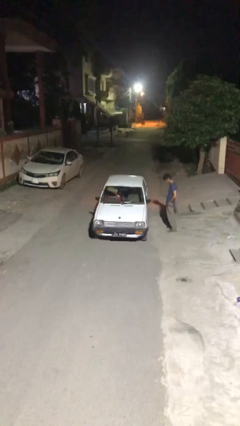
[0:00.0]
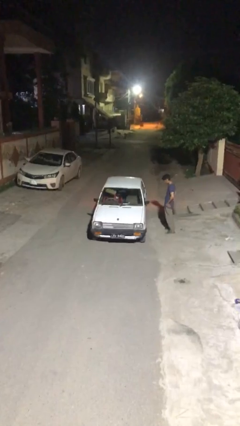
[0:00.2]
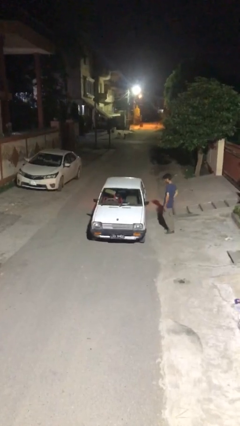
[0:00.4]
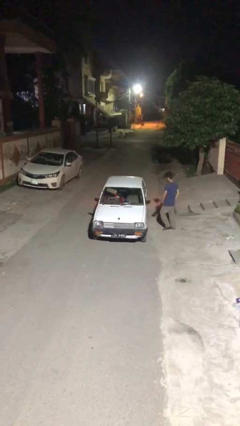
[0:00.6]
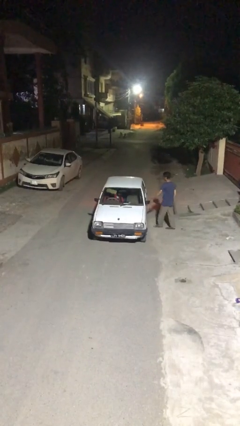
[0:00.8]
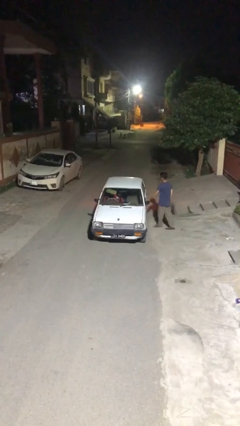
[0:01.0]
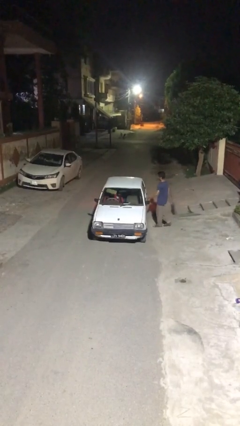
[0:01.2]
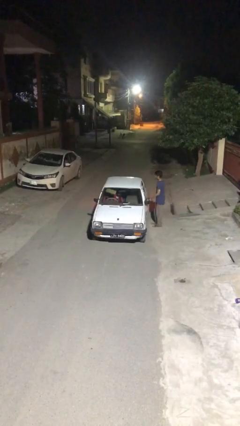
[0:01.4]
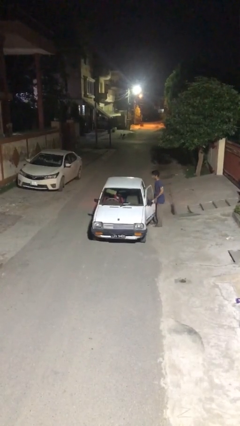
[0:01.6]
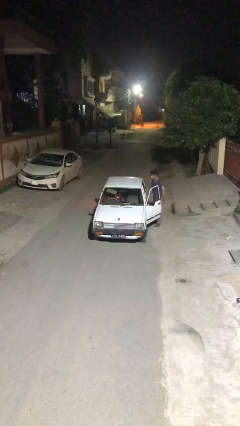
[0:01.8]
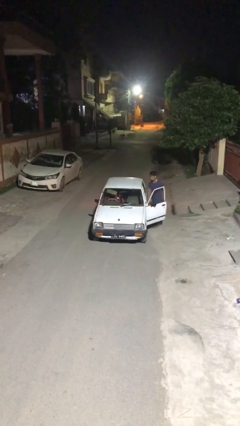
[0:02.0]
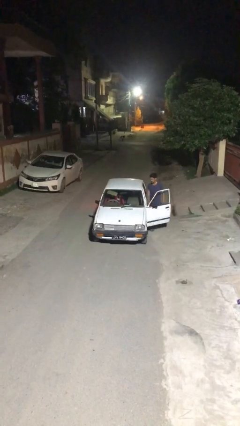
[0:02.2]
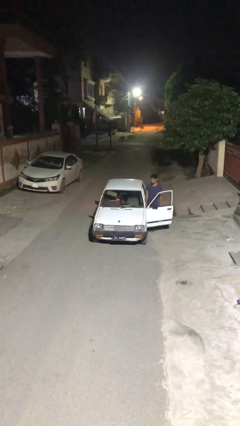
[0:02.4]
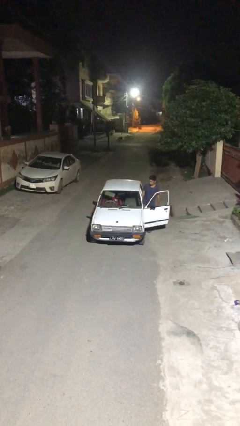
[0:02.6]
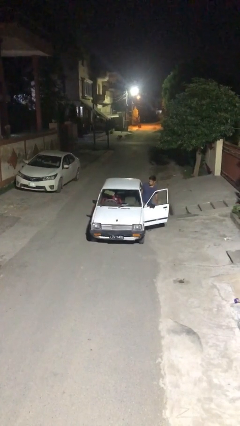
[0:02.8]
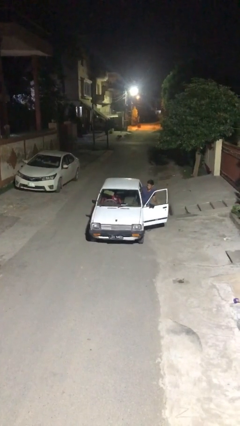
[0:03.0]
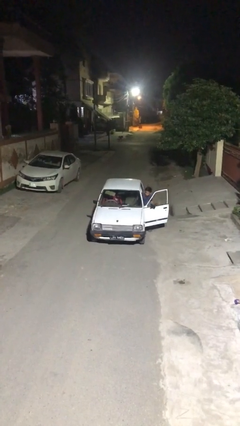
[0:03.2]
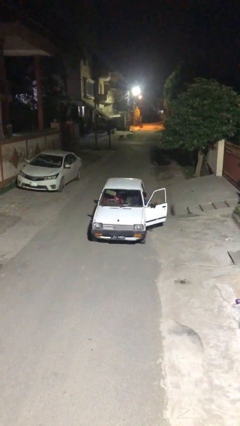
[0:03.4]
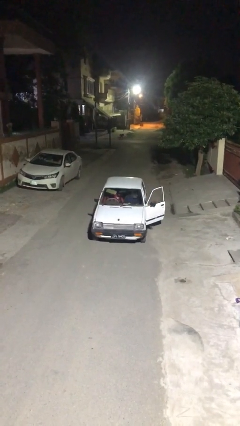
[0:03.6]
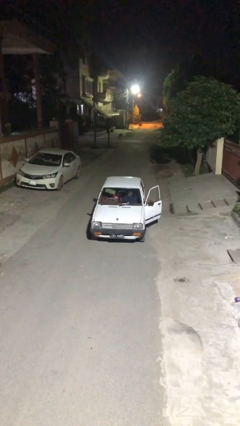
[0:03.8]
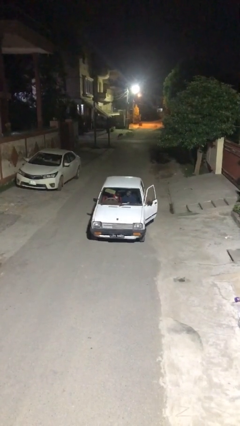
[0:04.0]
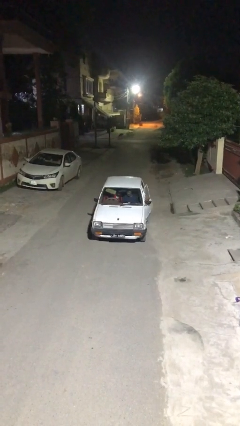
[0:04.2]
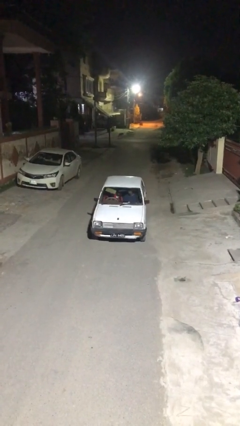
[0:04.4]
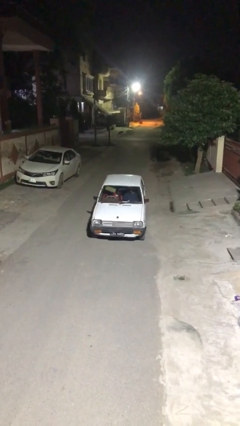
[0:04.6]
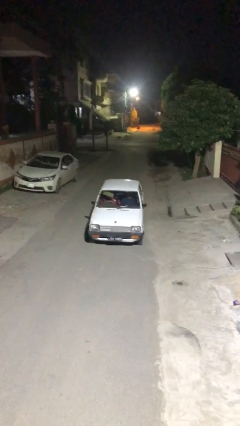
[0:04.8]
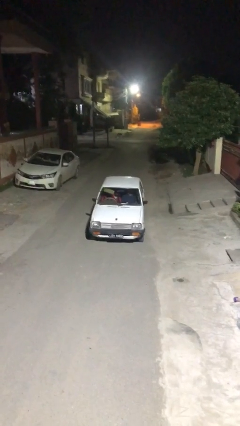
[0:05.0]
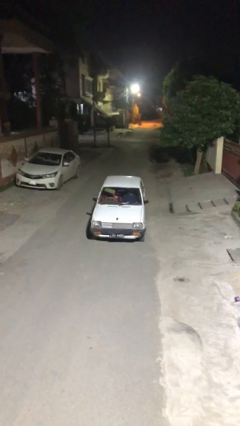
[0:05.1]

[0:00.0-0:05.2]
car picks up person

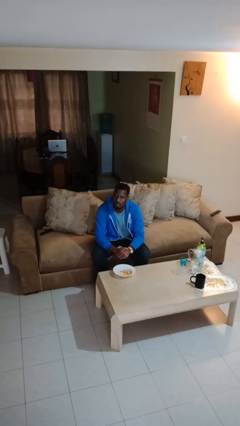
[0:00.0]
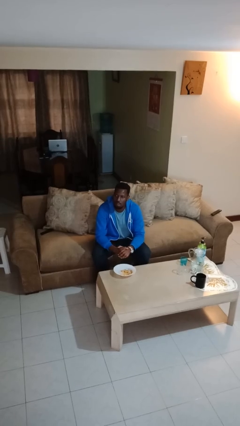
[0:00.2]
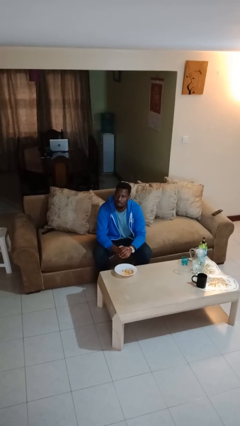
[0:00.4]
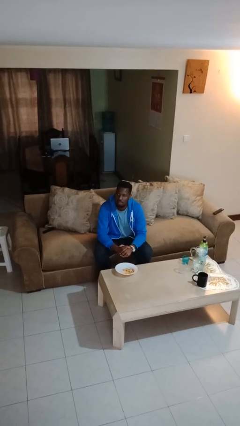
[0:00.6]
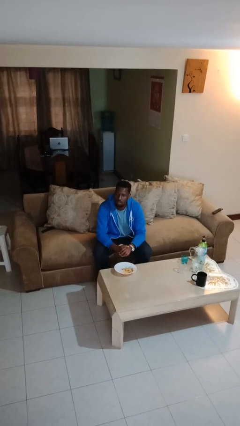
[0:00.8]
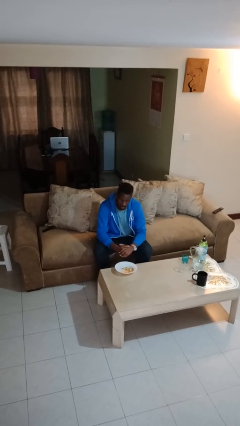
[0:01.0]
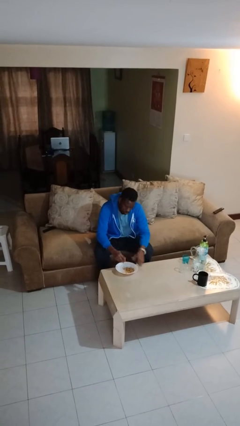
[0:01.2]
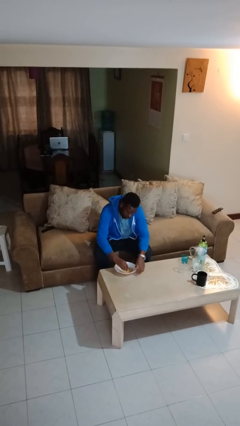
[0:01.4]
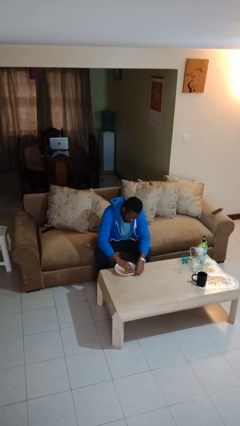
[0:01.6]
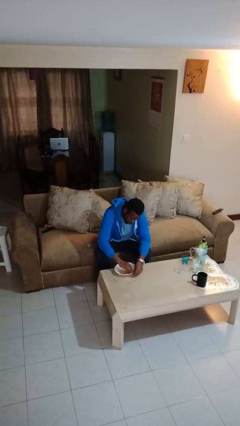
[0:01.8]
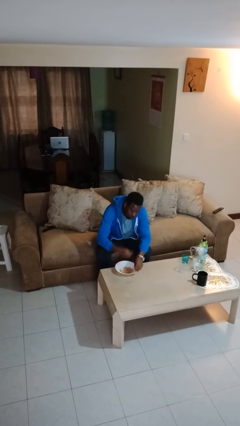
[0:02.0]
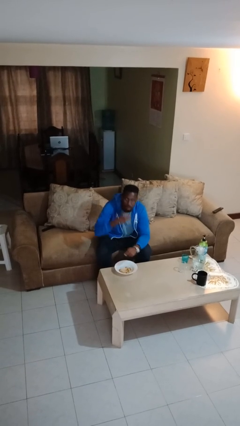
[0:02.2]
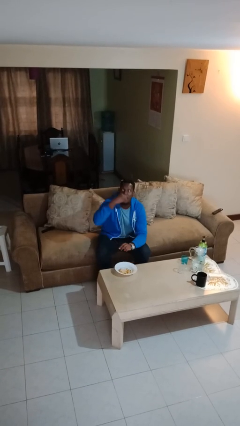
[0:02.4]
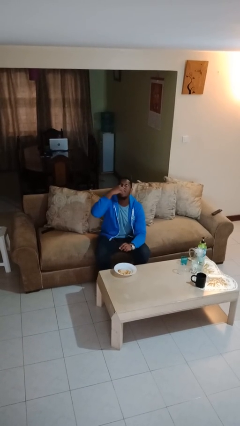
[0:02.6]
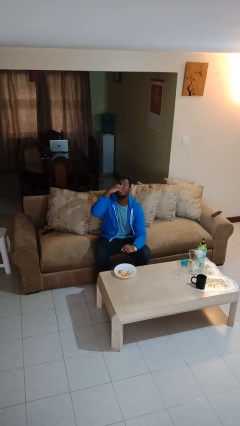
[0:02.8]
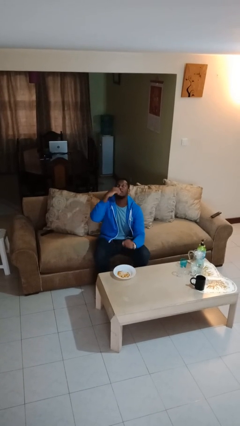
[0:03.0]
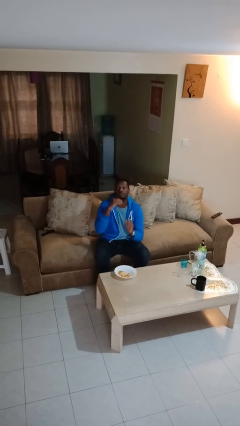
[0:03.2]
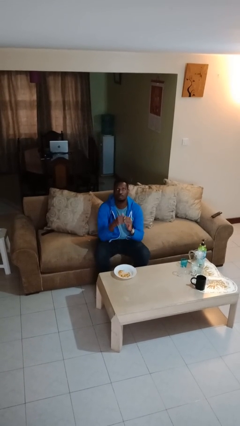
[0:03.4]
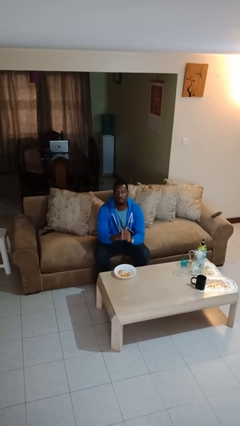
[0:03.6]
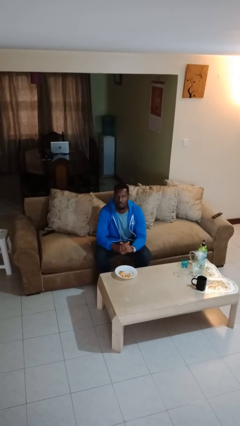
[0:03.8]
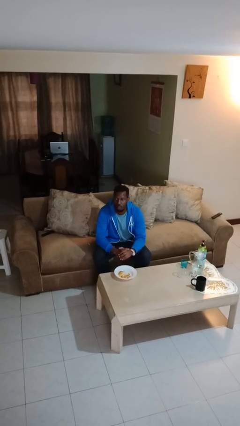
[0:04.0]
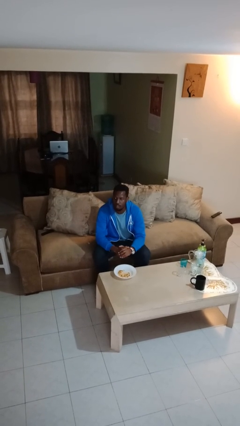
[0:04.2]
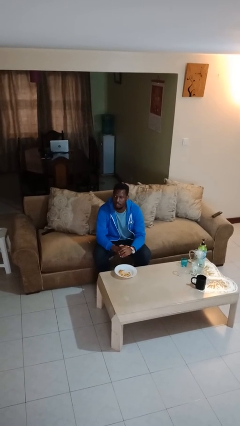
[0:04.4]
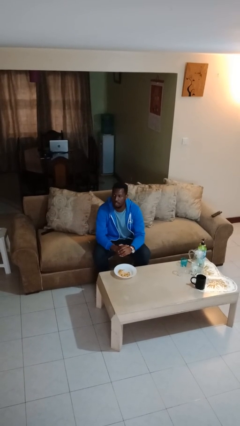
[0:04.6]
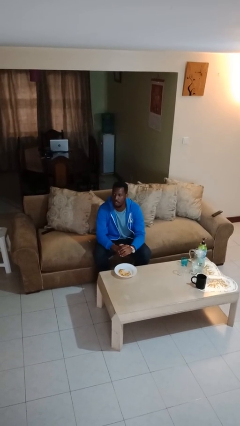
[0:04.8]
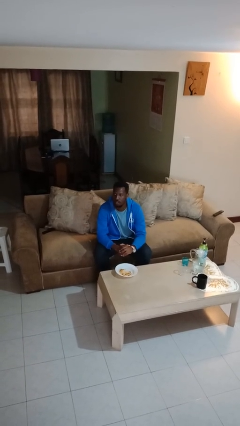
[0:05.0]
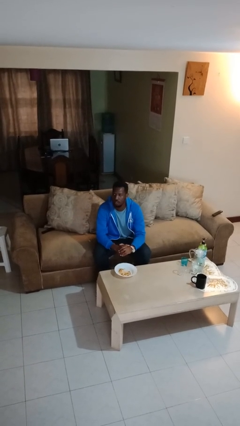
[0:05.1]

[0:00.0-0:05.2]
person eats with hands

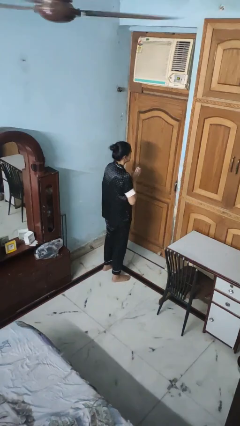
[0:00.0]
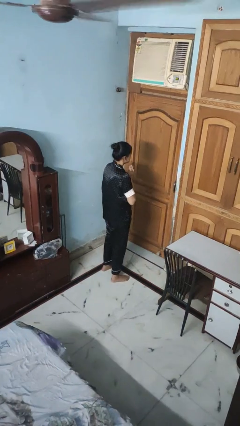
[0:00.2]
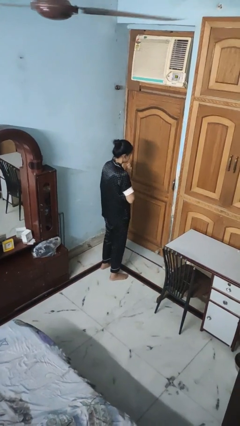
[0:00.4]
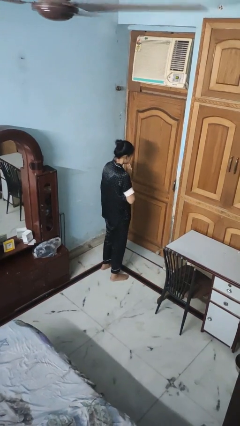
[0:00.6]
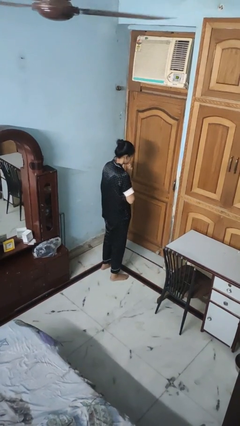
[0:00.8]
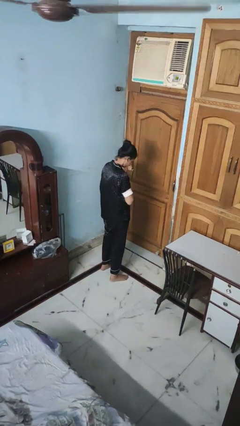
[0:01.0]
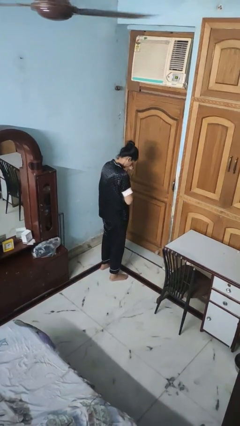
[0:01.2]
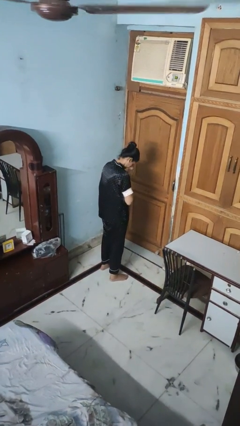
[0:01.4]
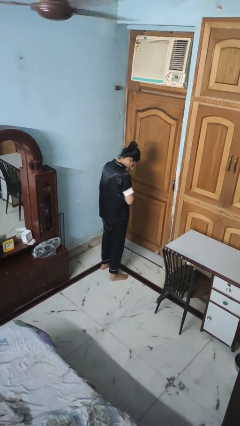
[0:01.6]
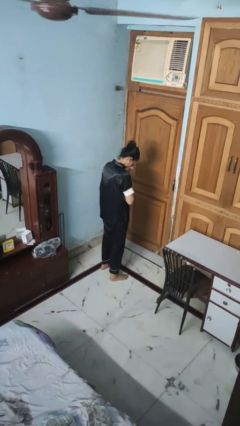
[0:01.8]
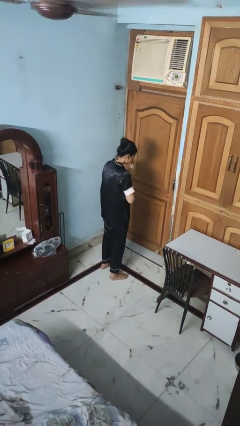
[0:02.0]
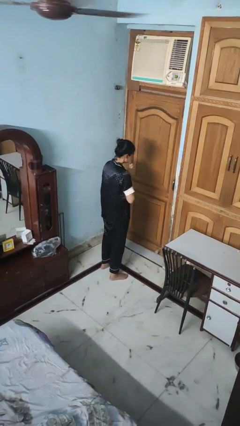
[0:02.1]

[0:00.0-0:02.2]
person prays

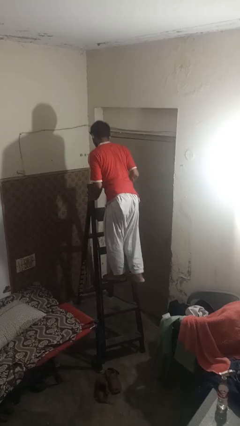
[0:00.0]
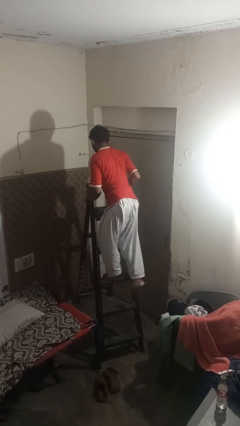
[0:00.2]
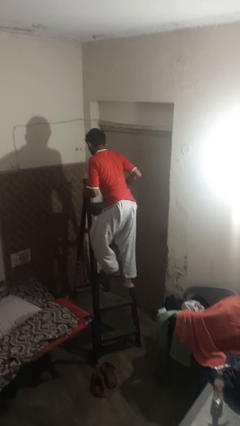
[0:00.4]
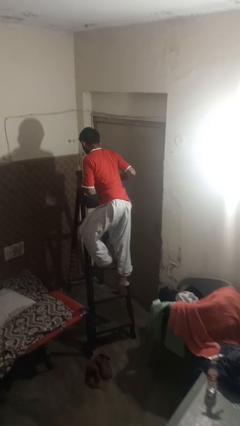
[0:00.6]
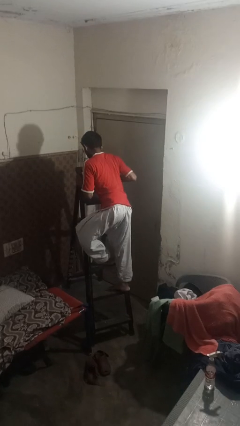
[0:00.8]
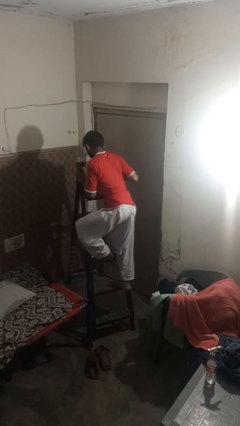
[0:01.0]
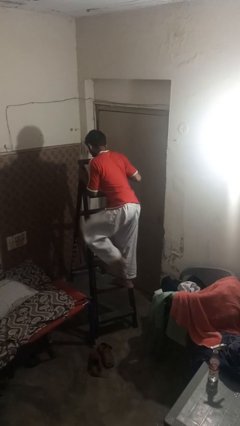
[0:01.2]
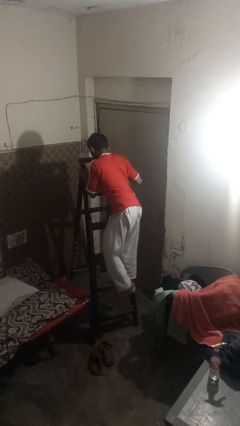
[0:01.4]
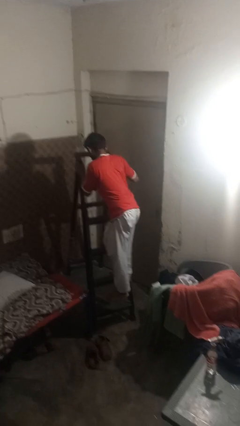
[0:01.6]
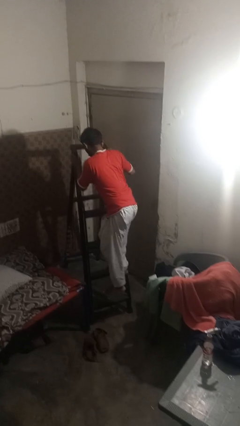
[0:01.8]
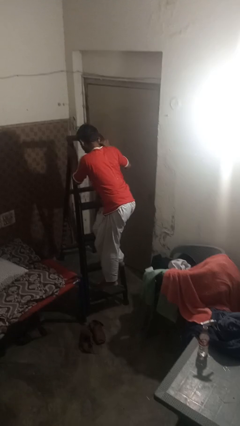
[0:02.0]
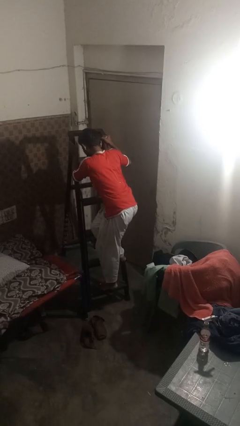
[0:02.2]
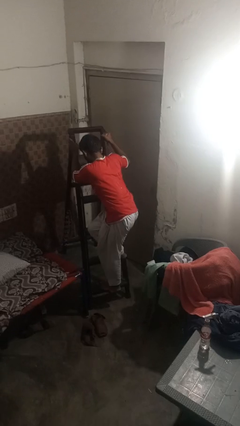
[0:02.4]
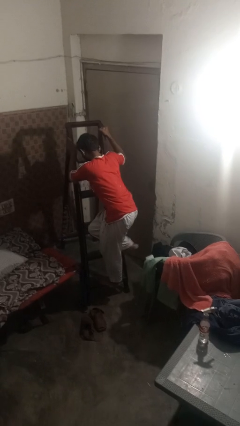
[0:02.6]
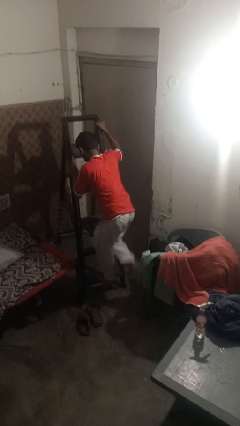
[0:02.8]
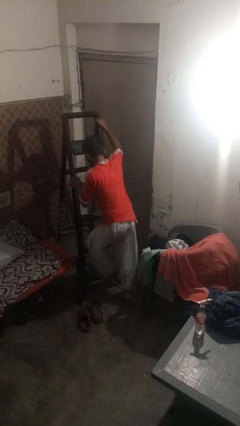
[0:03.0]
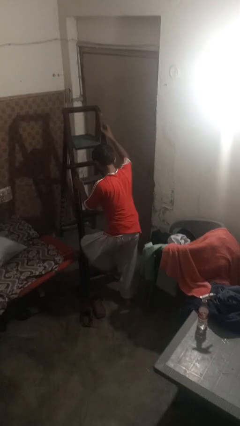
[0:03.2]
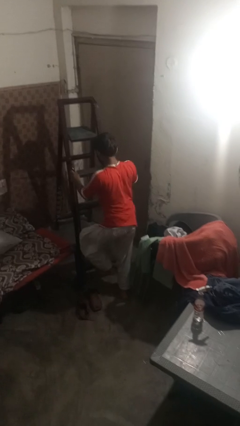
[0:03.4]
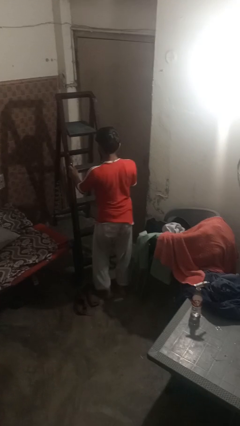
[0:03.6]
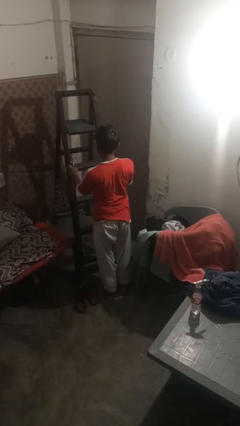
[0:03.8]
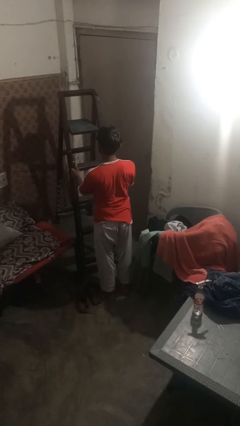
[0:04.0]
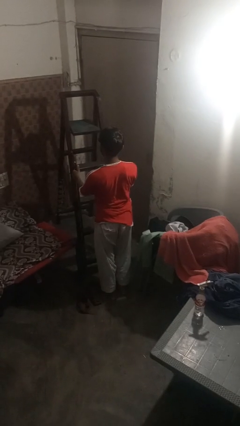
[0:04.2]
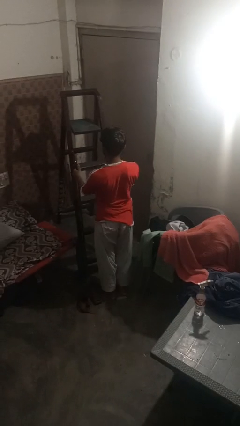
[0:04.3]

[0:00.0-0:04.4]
person climbs down ladder

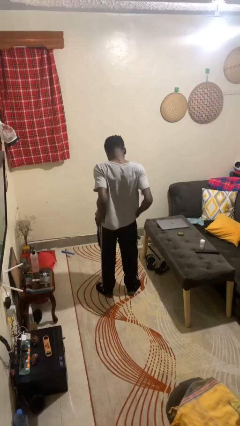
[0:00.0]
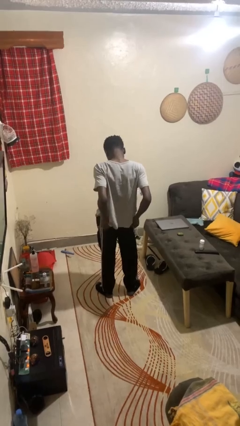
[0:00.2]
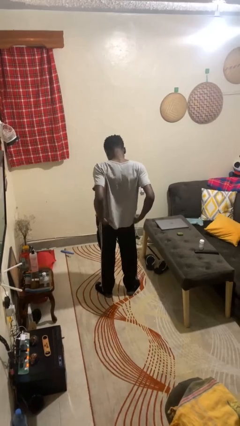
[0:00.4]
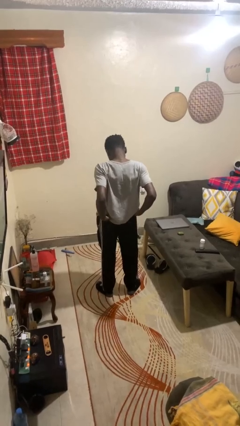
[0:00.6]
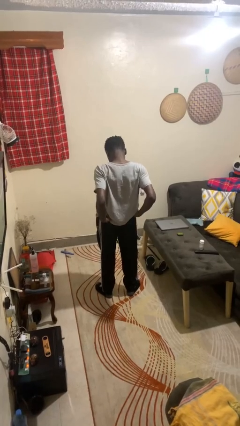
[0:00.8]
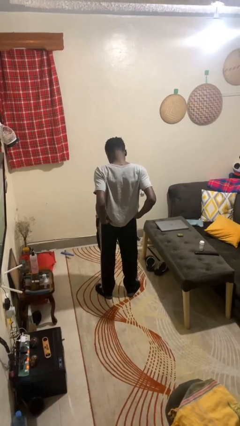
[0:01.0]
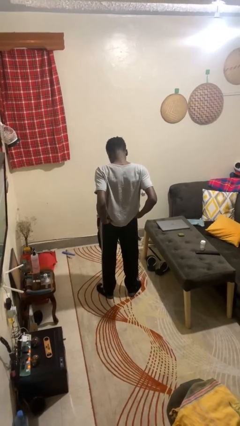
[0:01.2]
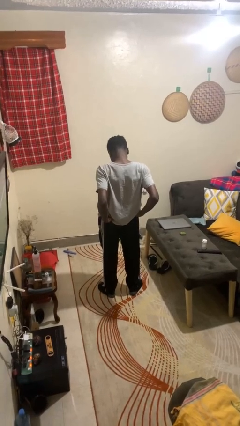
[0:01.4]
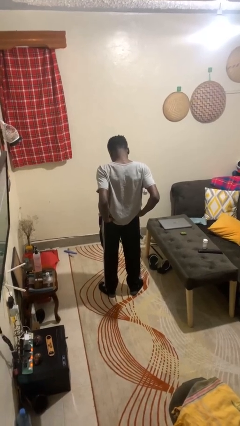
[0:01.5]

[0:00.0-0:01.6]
person puts hands in back pockets
